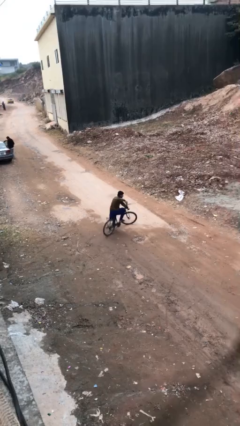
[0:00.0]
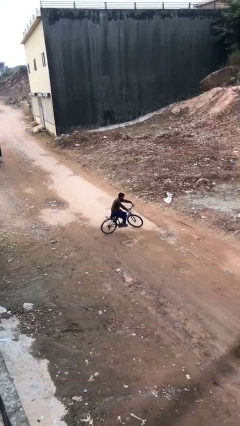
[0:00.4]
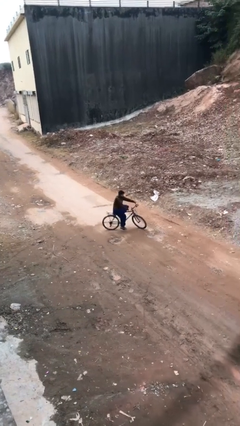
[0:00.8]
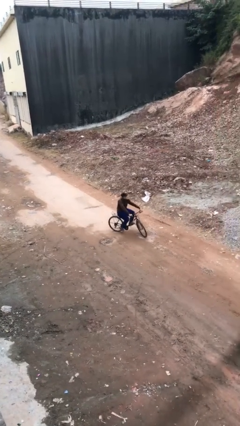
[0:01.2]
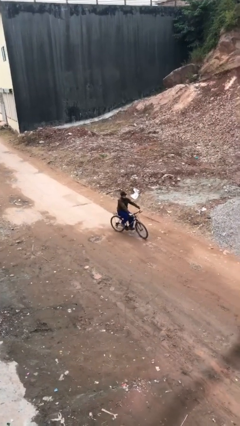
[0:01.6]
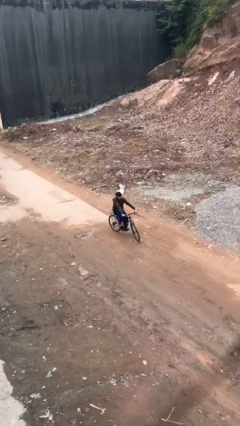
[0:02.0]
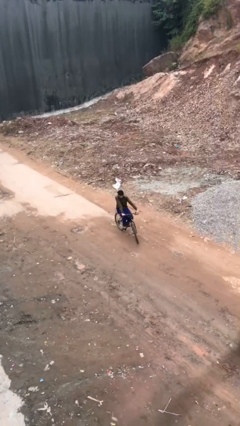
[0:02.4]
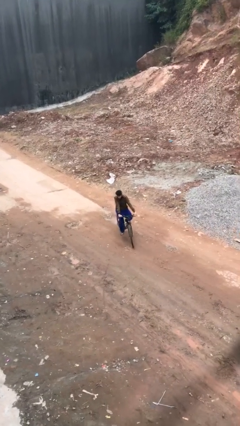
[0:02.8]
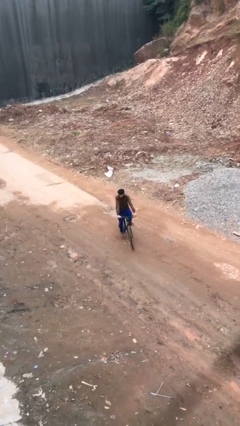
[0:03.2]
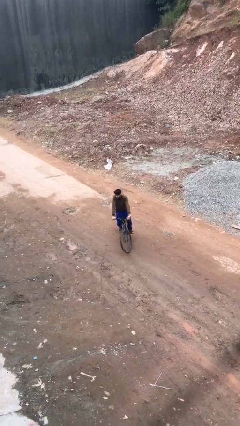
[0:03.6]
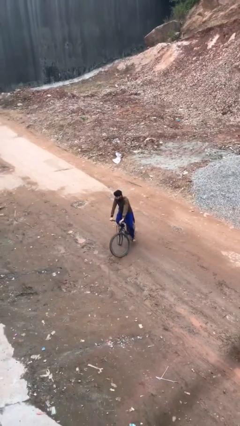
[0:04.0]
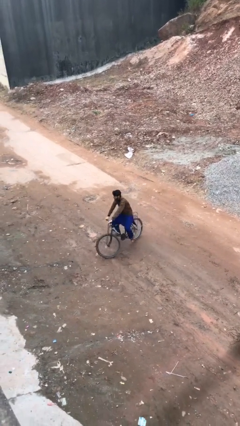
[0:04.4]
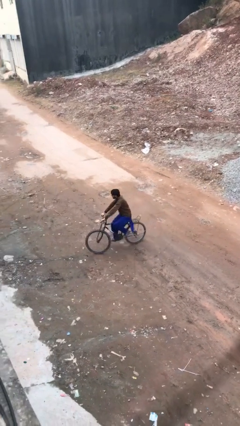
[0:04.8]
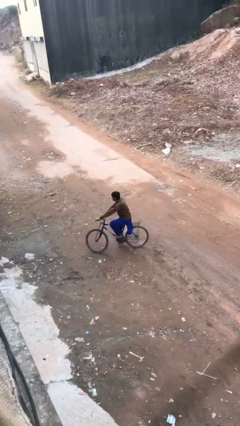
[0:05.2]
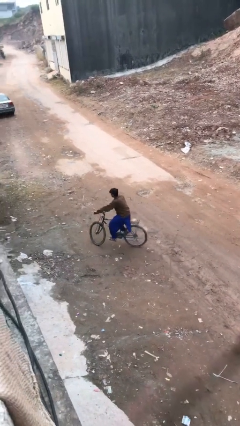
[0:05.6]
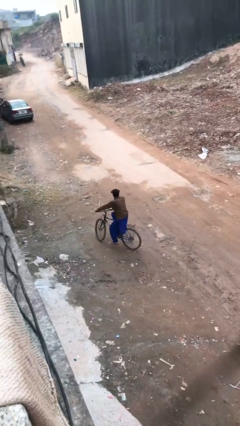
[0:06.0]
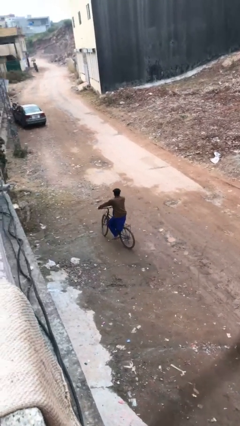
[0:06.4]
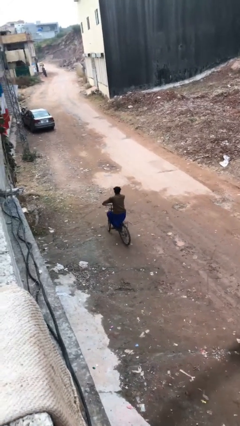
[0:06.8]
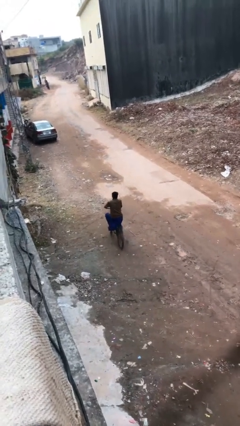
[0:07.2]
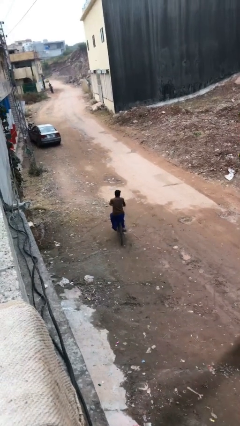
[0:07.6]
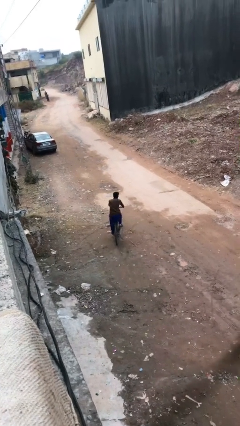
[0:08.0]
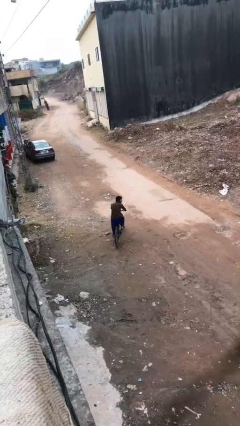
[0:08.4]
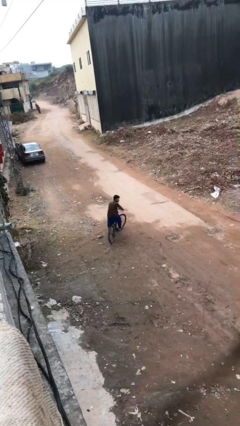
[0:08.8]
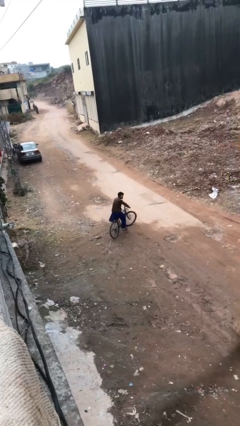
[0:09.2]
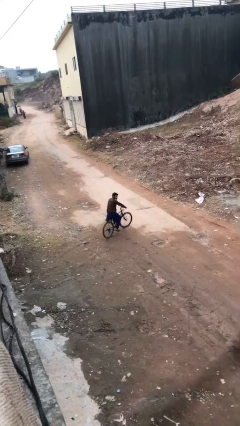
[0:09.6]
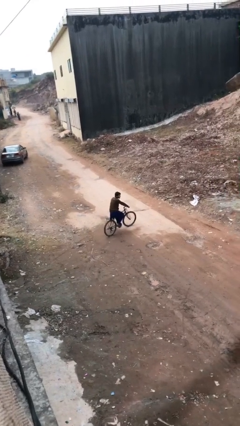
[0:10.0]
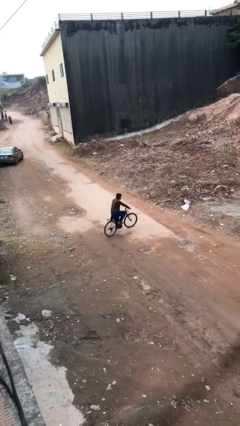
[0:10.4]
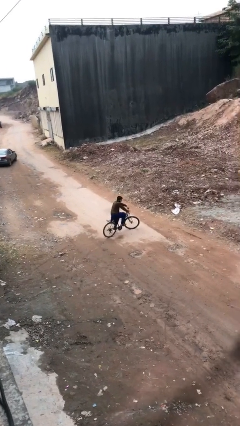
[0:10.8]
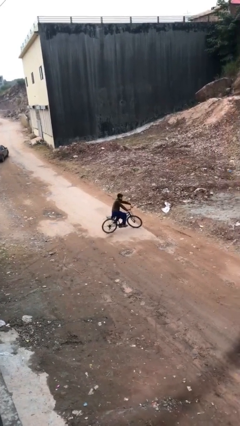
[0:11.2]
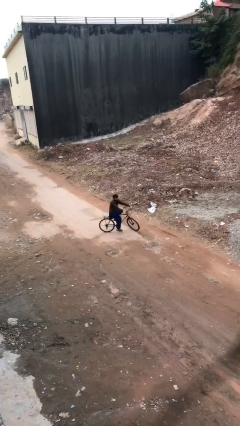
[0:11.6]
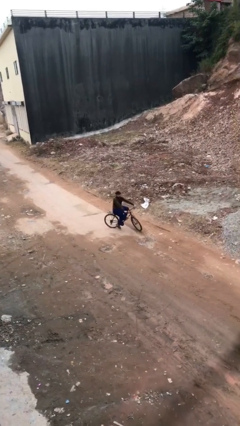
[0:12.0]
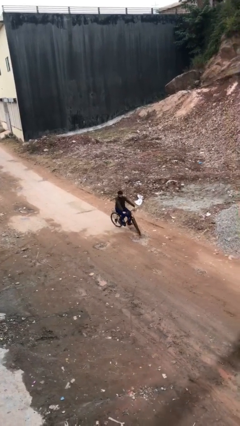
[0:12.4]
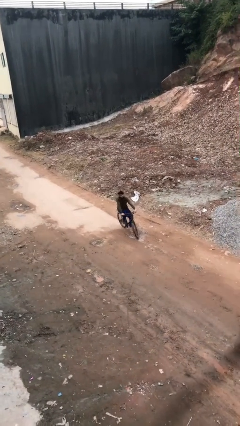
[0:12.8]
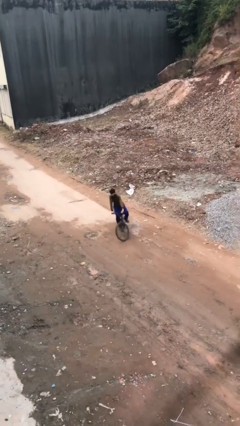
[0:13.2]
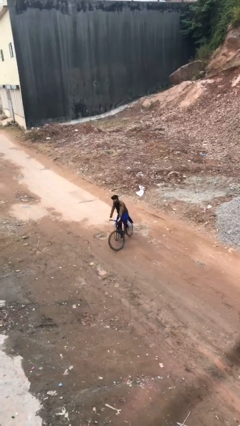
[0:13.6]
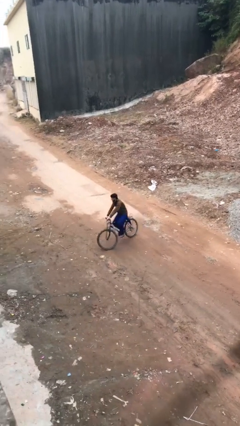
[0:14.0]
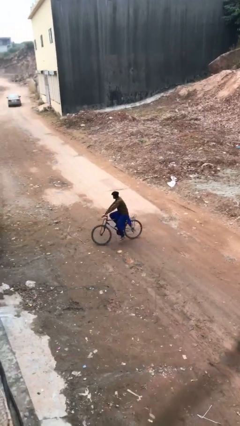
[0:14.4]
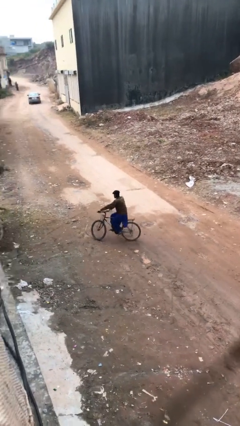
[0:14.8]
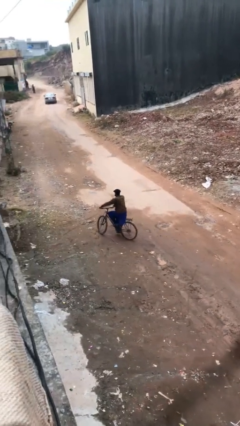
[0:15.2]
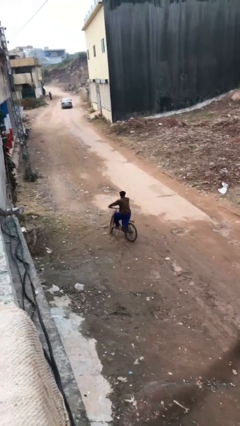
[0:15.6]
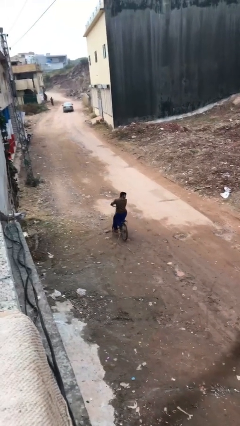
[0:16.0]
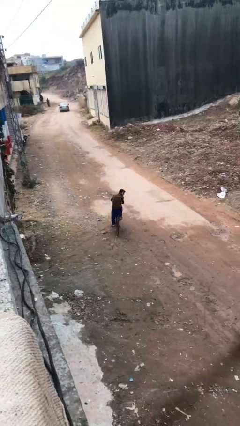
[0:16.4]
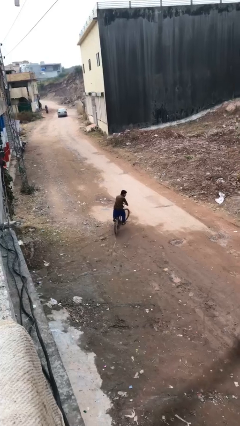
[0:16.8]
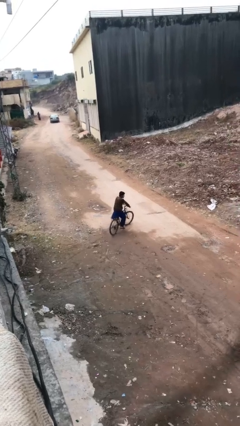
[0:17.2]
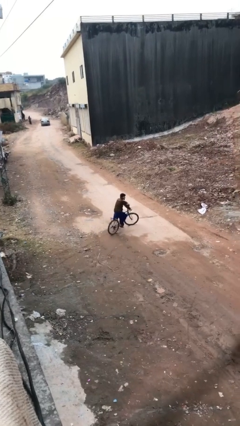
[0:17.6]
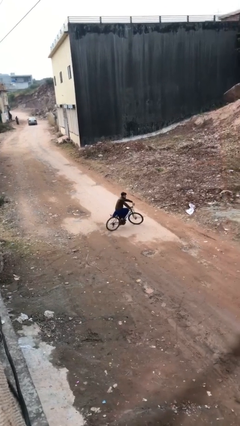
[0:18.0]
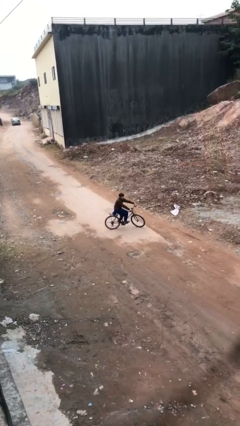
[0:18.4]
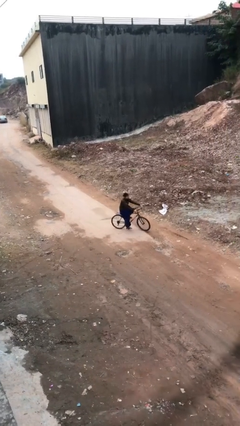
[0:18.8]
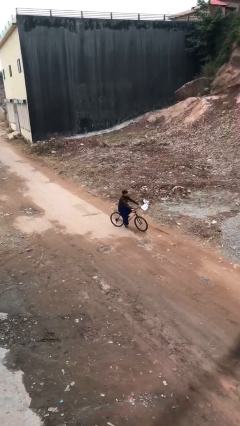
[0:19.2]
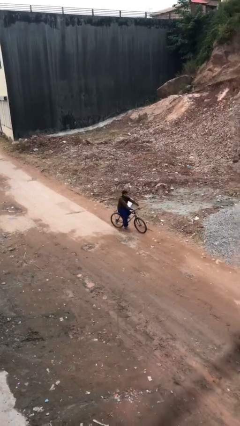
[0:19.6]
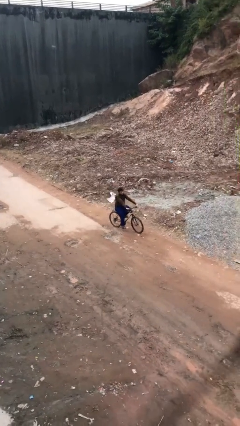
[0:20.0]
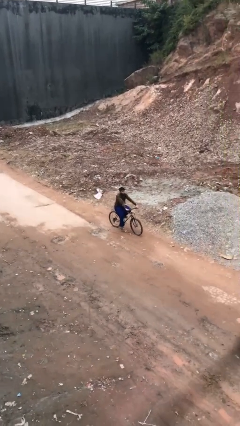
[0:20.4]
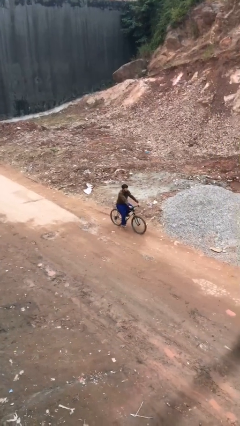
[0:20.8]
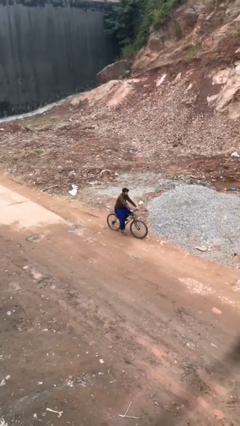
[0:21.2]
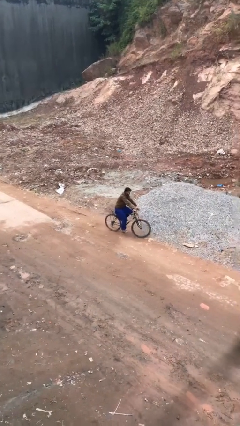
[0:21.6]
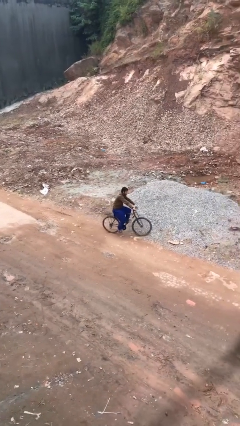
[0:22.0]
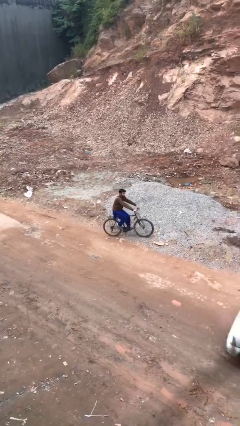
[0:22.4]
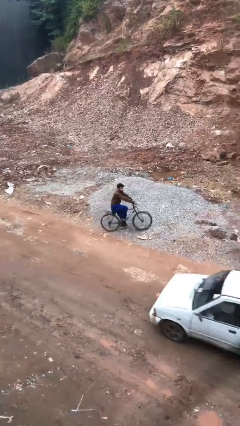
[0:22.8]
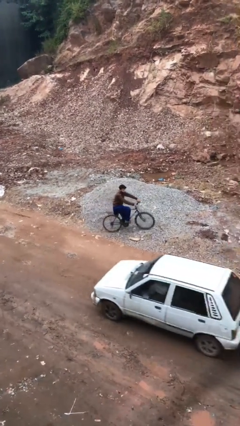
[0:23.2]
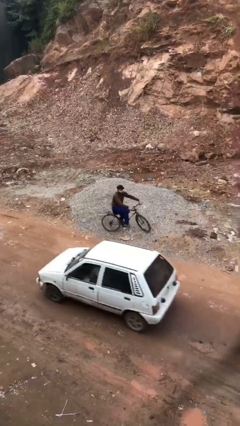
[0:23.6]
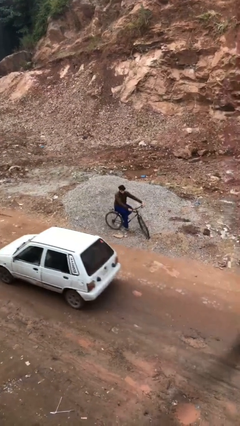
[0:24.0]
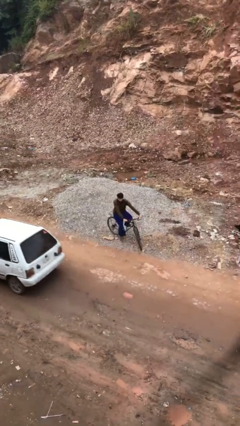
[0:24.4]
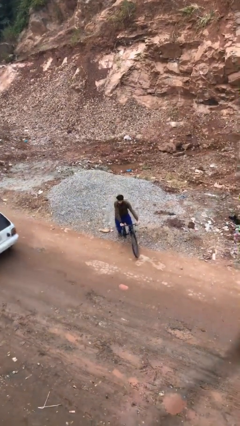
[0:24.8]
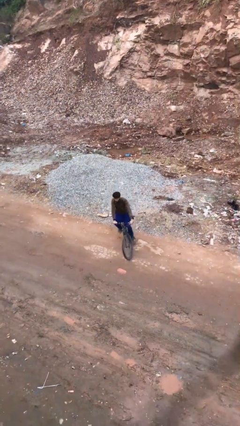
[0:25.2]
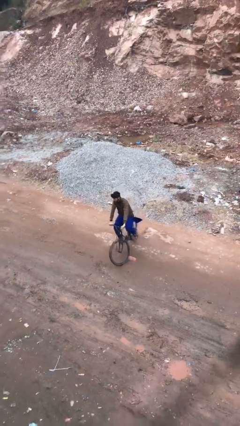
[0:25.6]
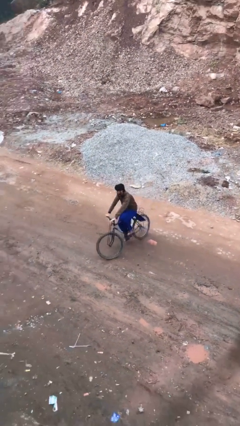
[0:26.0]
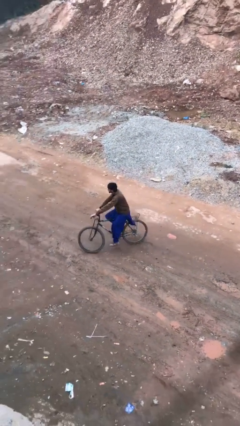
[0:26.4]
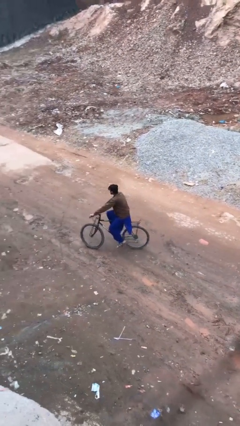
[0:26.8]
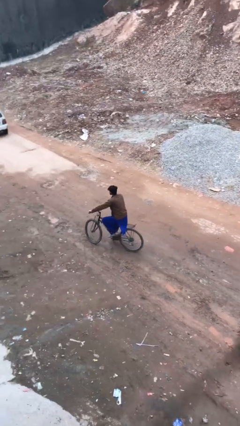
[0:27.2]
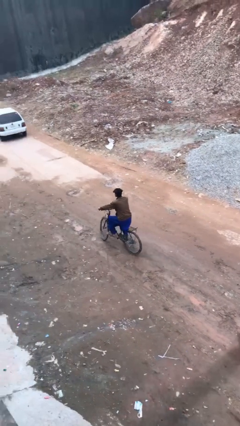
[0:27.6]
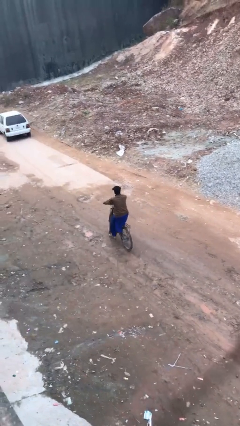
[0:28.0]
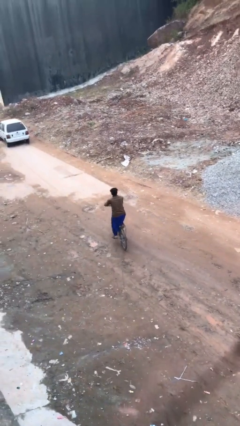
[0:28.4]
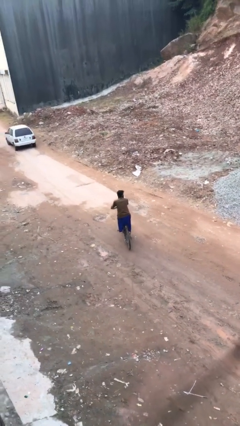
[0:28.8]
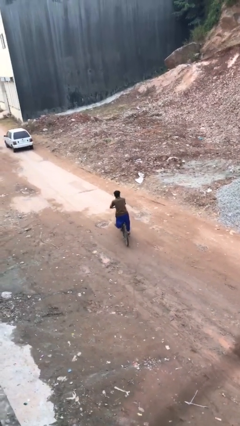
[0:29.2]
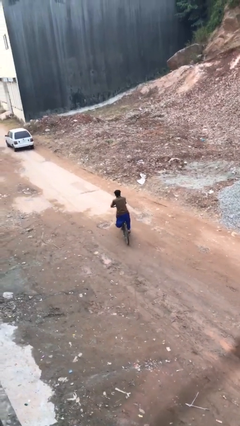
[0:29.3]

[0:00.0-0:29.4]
person rides bicycle

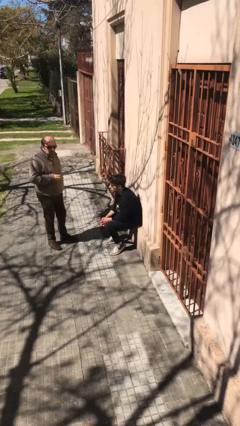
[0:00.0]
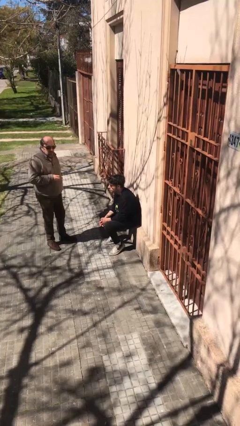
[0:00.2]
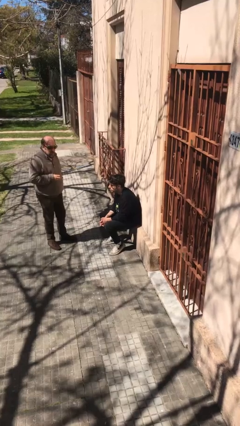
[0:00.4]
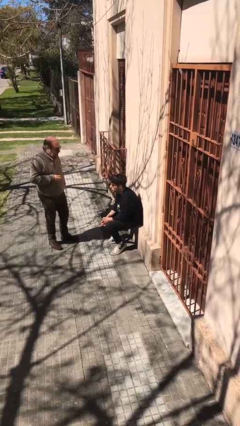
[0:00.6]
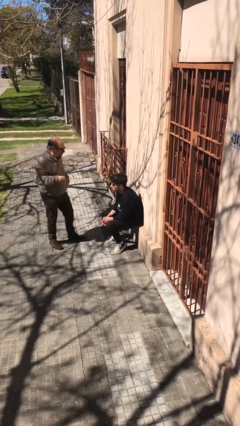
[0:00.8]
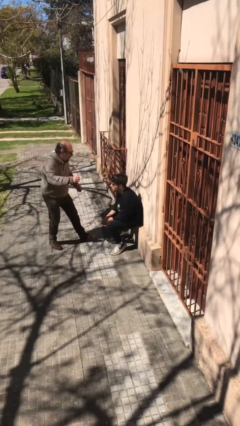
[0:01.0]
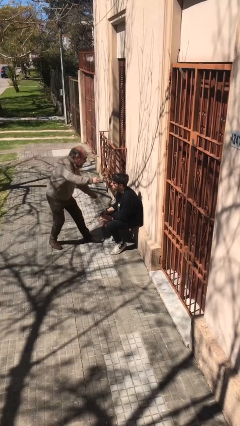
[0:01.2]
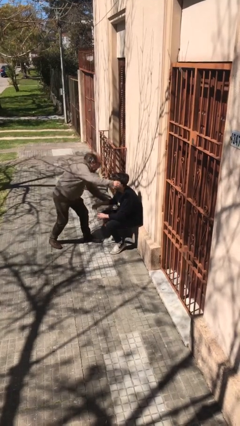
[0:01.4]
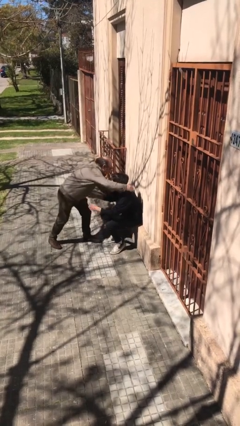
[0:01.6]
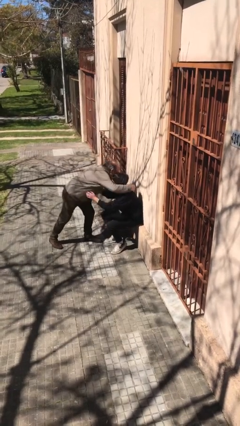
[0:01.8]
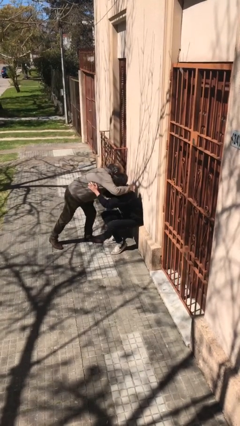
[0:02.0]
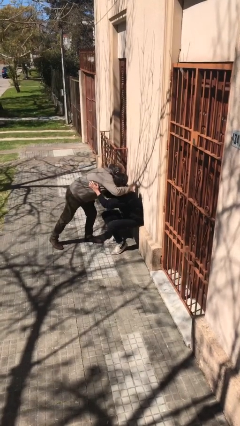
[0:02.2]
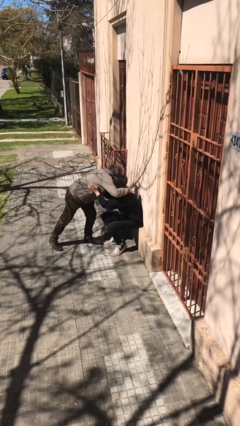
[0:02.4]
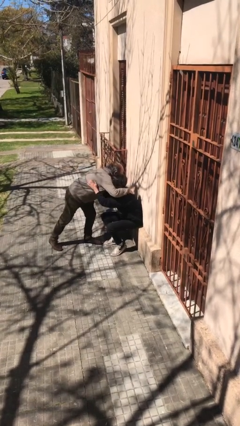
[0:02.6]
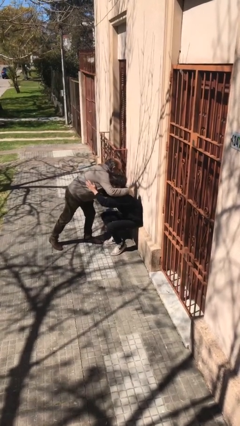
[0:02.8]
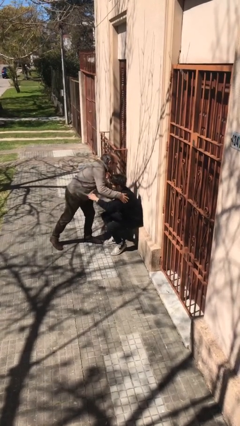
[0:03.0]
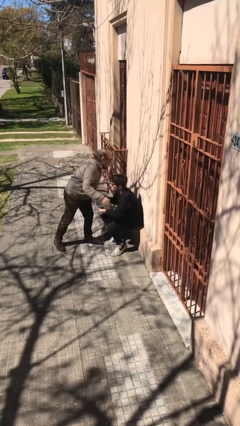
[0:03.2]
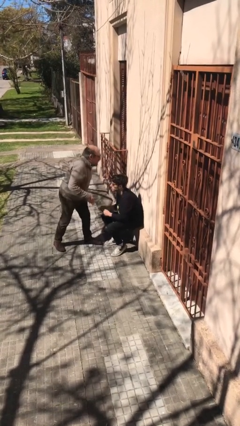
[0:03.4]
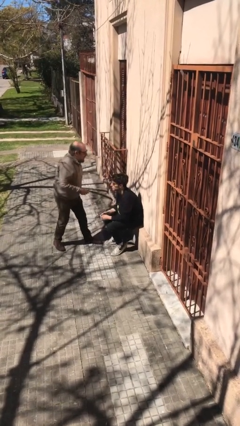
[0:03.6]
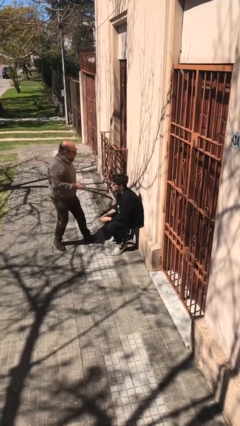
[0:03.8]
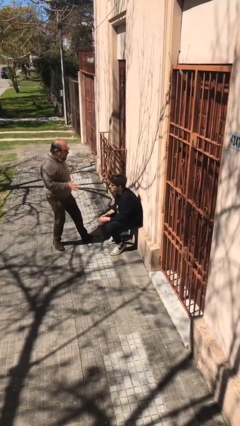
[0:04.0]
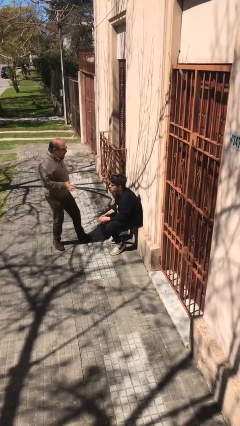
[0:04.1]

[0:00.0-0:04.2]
person embraces person
